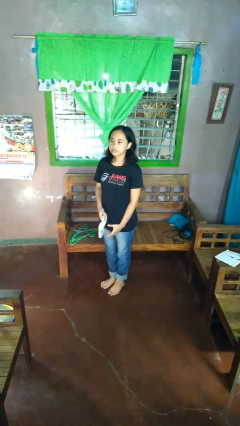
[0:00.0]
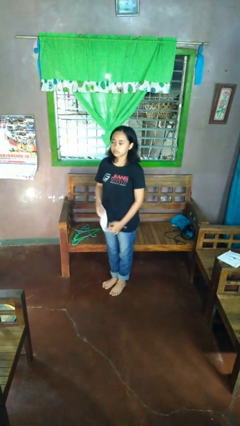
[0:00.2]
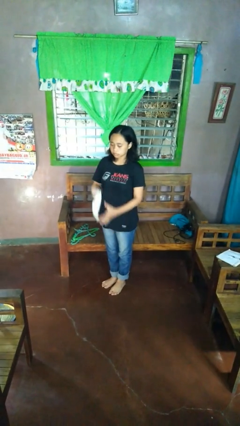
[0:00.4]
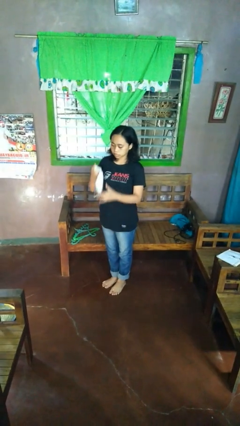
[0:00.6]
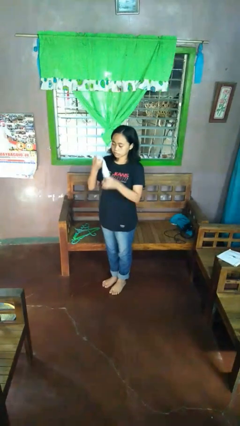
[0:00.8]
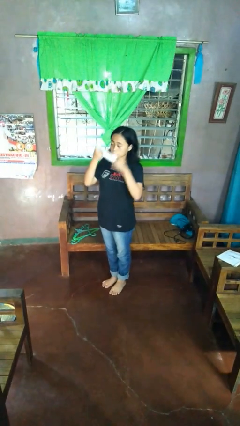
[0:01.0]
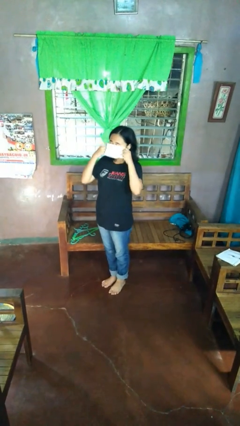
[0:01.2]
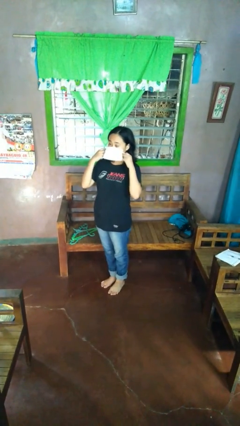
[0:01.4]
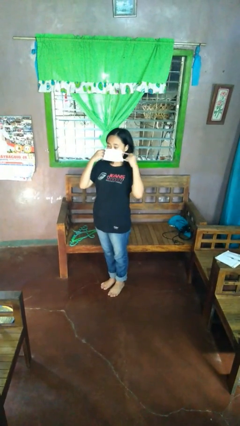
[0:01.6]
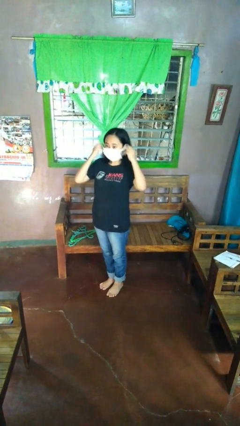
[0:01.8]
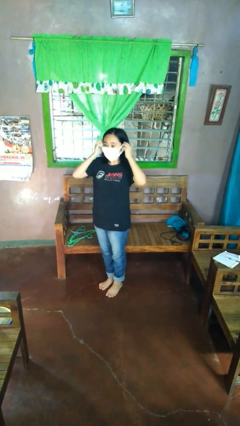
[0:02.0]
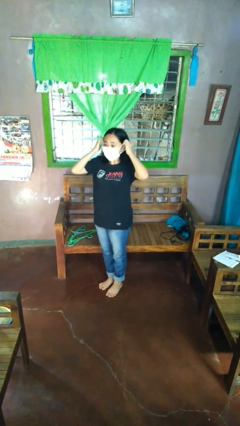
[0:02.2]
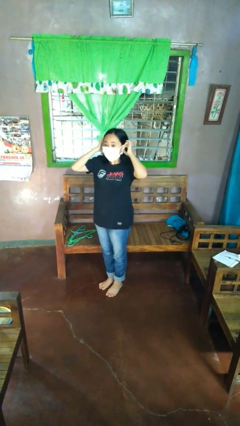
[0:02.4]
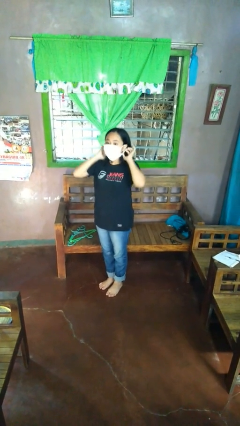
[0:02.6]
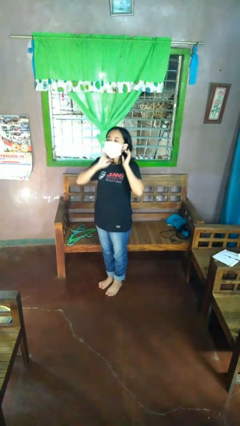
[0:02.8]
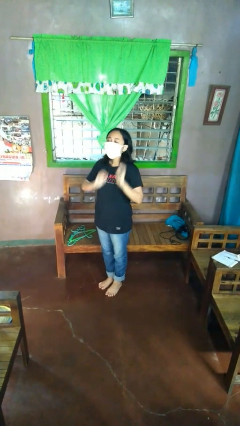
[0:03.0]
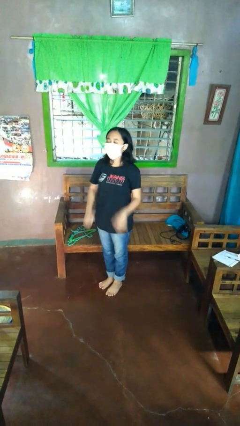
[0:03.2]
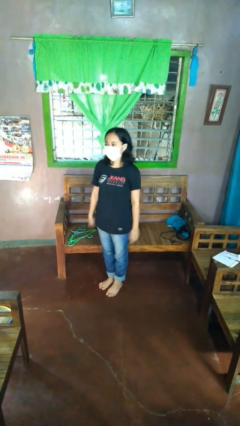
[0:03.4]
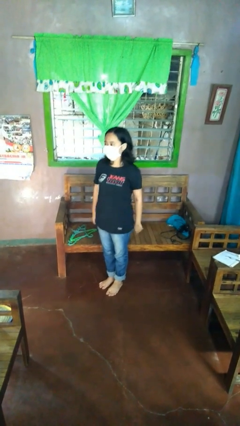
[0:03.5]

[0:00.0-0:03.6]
person puts on facemask

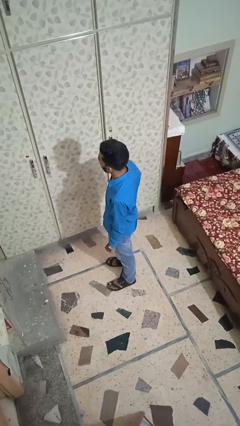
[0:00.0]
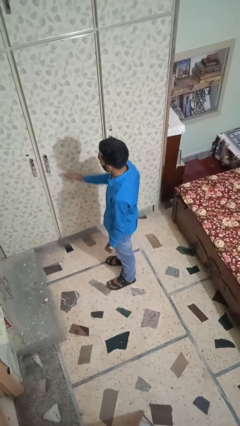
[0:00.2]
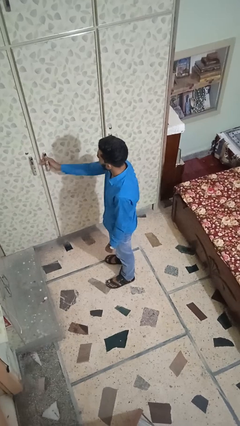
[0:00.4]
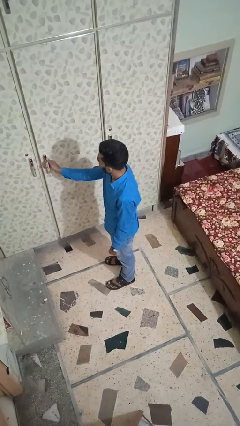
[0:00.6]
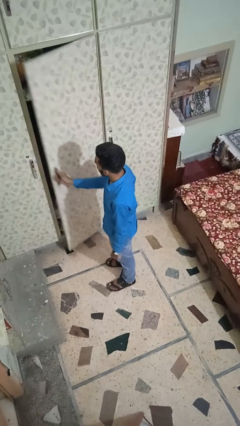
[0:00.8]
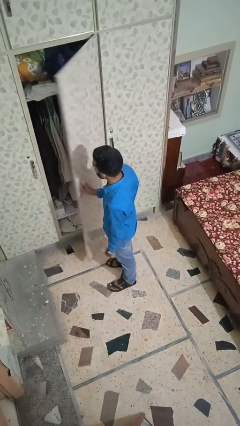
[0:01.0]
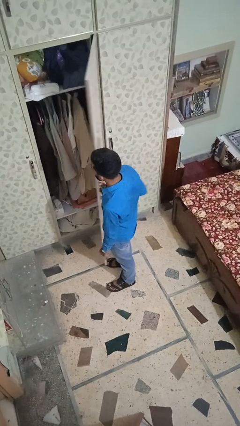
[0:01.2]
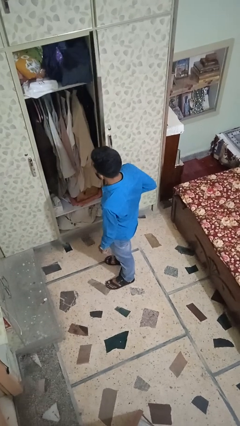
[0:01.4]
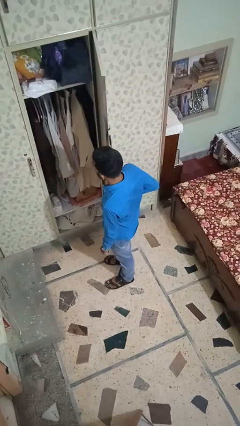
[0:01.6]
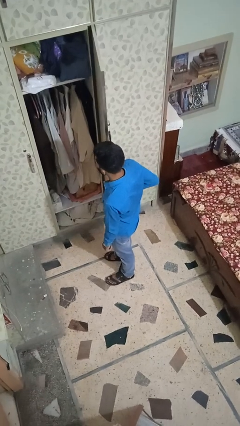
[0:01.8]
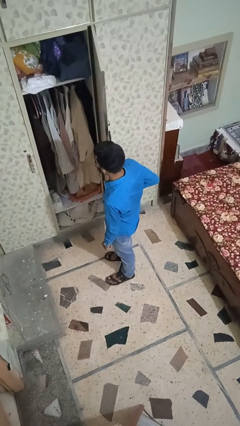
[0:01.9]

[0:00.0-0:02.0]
person opens closet door

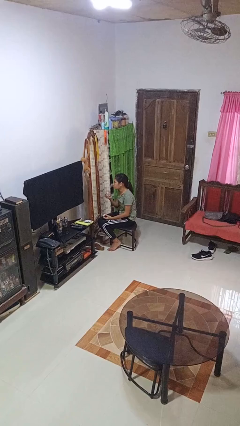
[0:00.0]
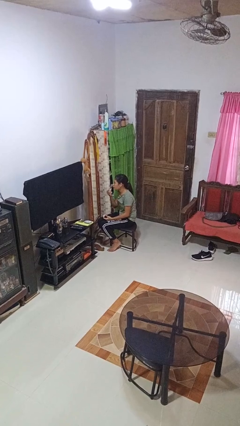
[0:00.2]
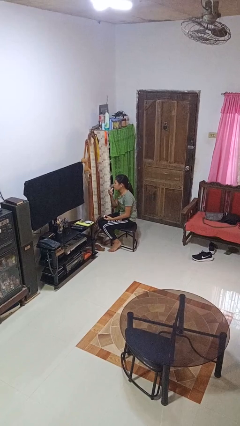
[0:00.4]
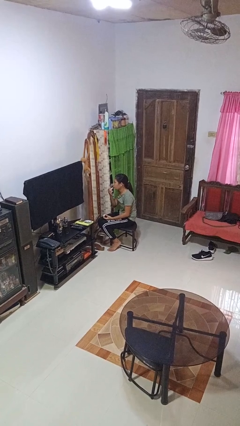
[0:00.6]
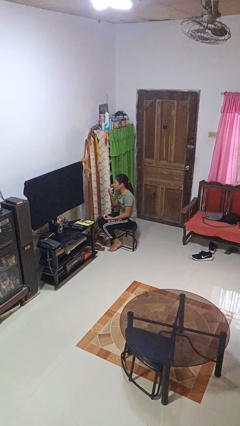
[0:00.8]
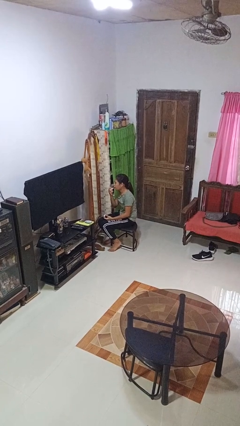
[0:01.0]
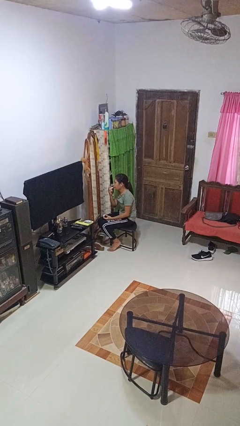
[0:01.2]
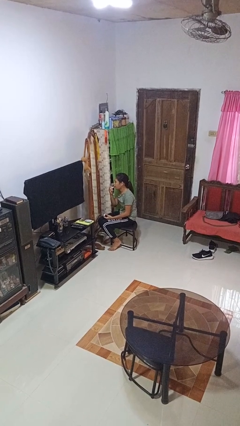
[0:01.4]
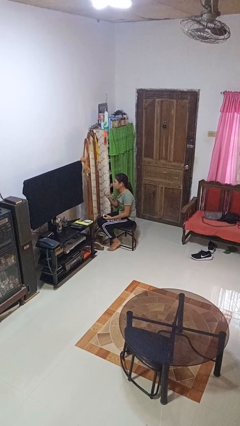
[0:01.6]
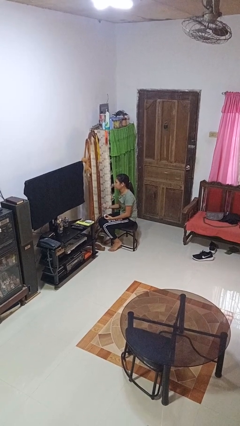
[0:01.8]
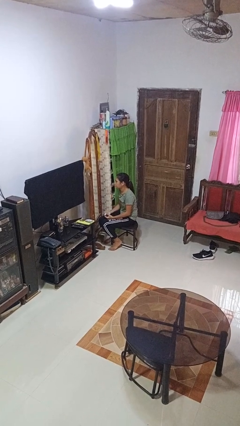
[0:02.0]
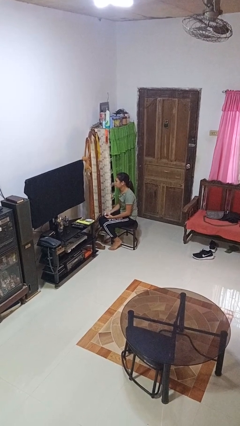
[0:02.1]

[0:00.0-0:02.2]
person applies lip makeup

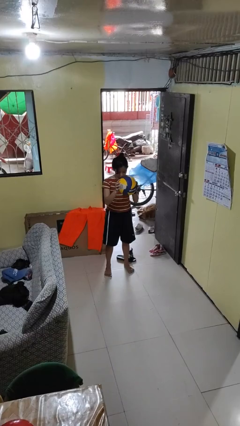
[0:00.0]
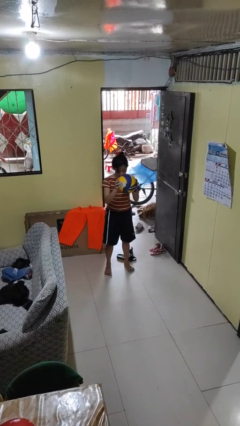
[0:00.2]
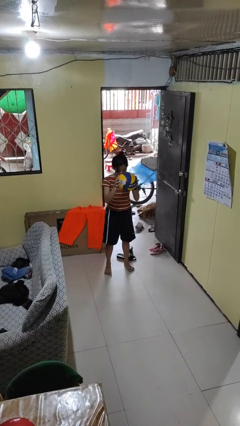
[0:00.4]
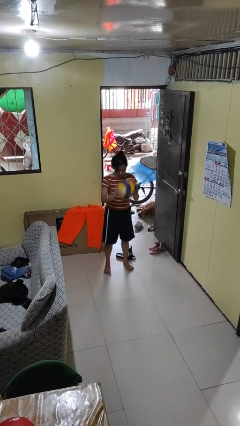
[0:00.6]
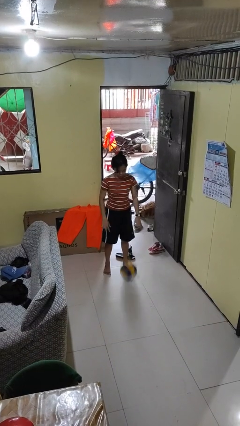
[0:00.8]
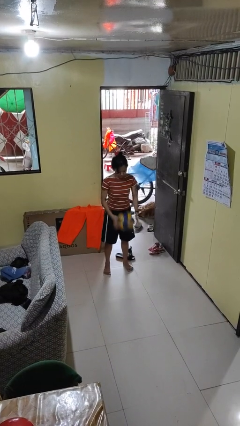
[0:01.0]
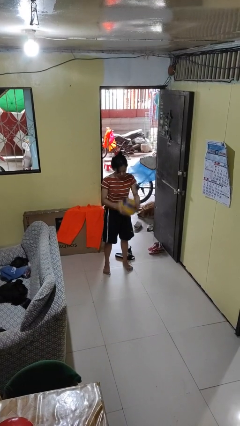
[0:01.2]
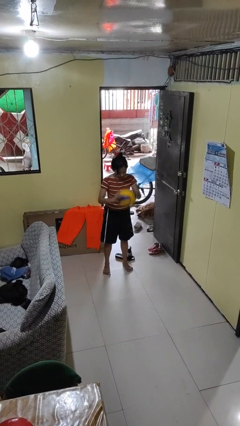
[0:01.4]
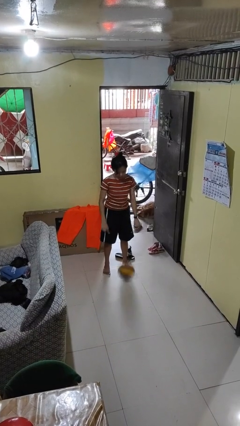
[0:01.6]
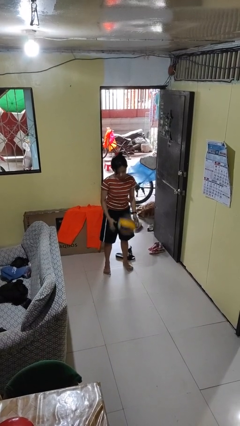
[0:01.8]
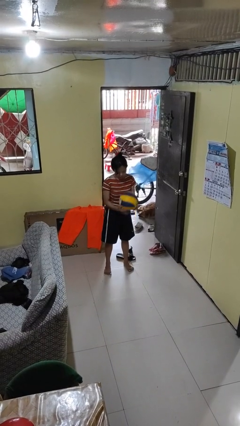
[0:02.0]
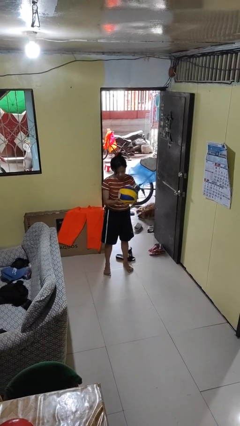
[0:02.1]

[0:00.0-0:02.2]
person bounces ball on floor

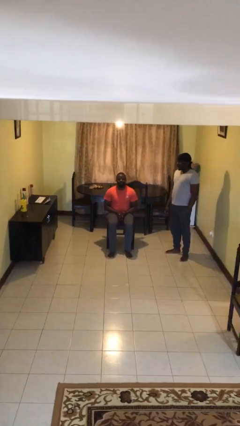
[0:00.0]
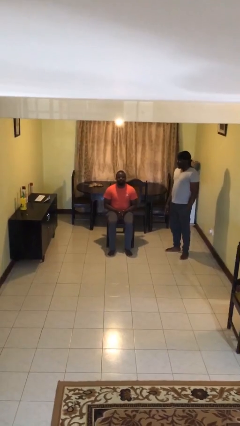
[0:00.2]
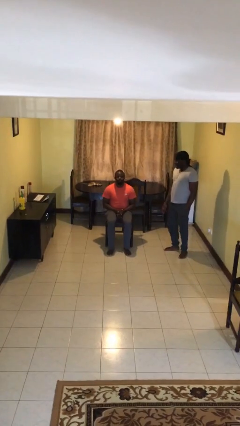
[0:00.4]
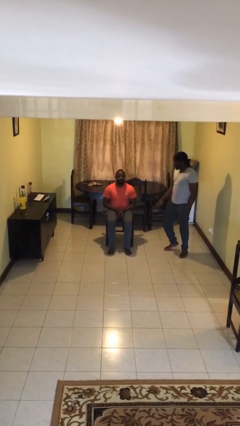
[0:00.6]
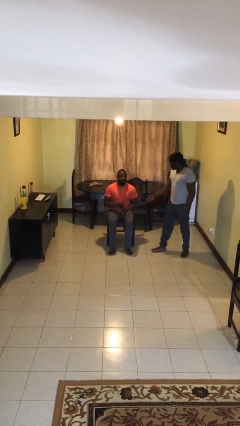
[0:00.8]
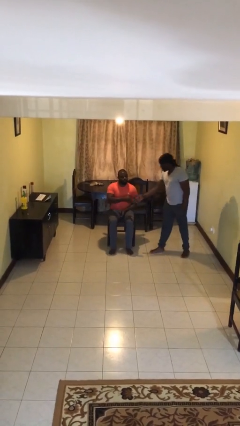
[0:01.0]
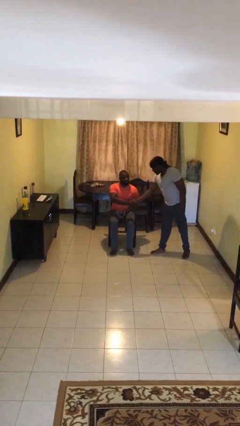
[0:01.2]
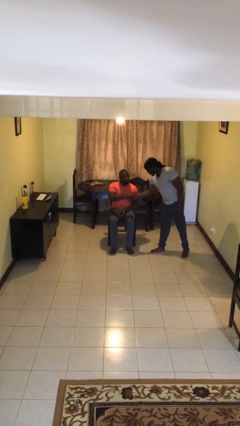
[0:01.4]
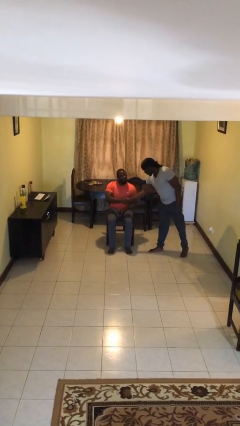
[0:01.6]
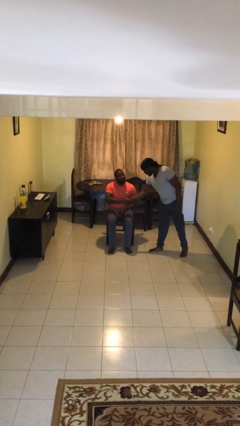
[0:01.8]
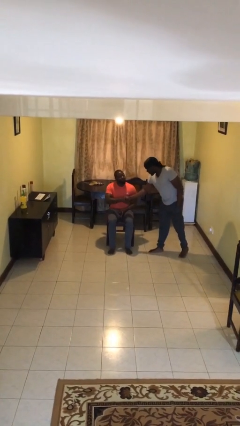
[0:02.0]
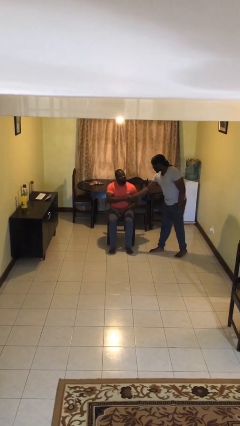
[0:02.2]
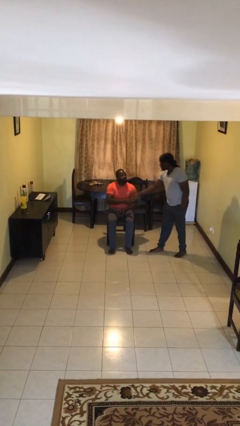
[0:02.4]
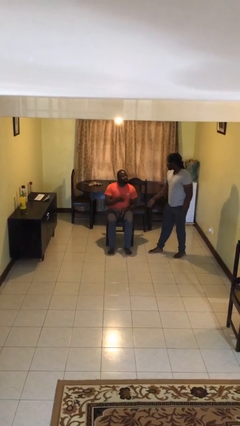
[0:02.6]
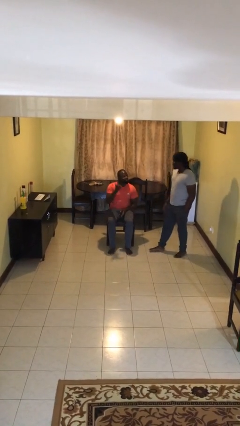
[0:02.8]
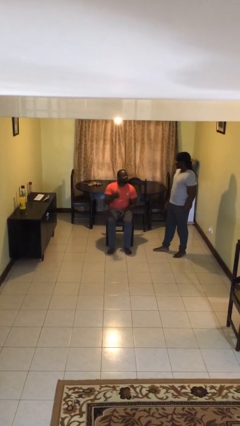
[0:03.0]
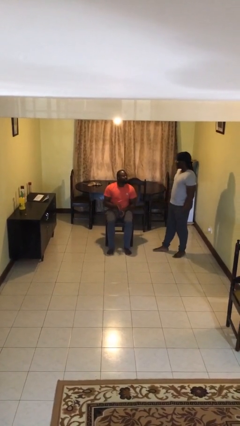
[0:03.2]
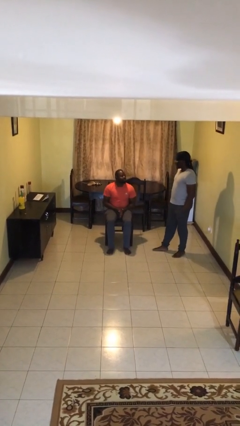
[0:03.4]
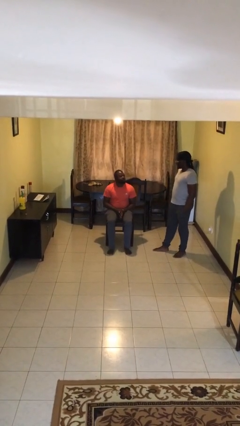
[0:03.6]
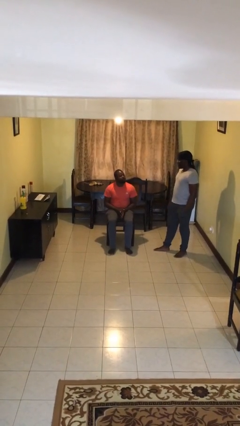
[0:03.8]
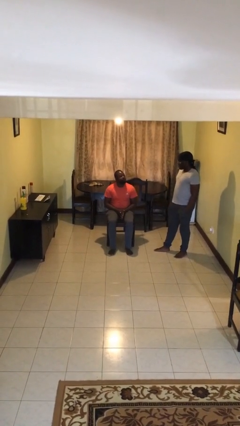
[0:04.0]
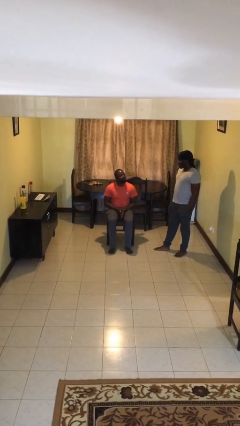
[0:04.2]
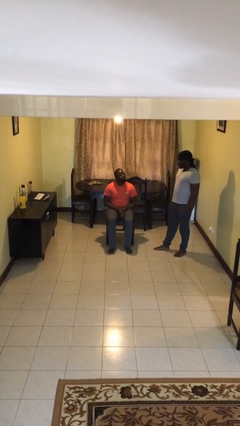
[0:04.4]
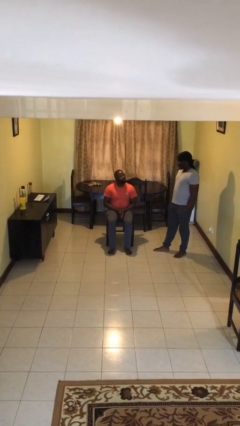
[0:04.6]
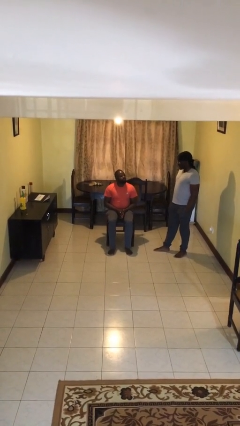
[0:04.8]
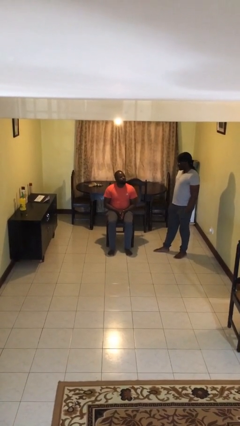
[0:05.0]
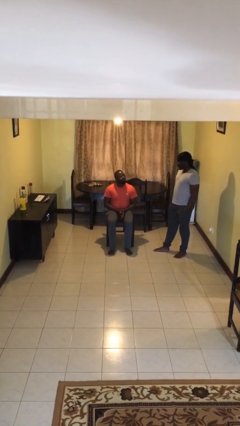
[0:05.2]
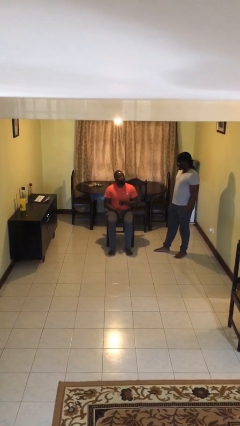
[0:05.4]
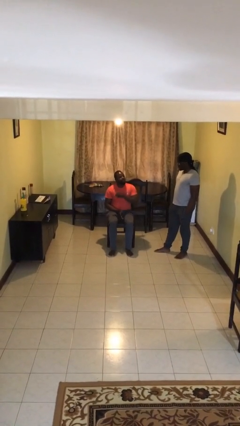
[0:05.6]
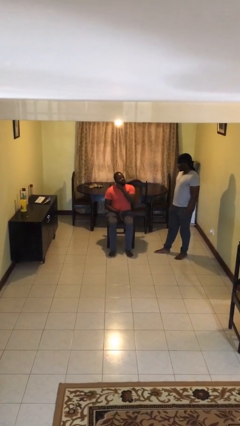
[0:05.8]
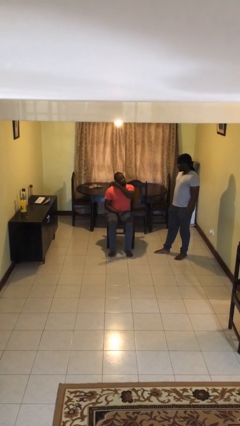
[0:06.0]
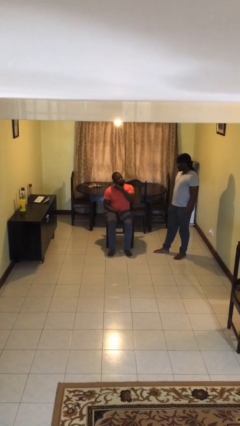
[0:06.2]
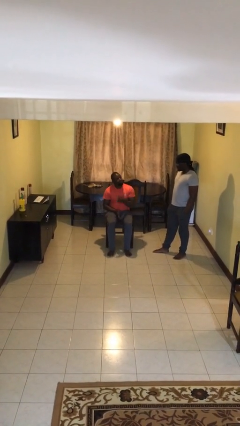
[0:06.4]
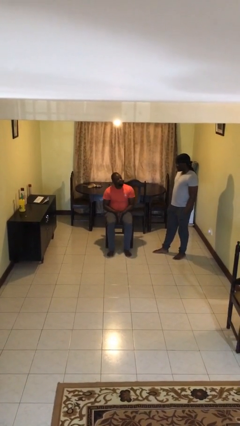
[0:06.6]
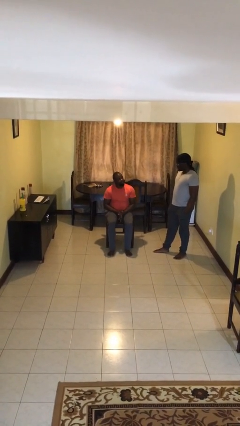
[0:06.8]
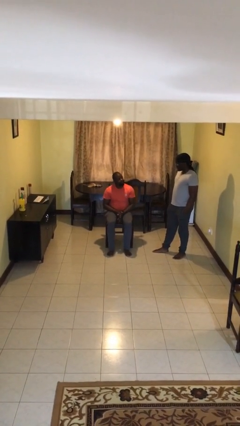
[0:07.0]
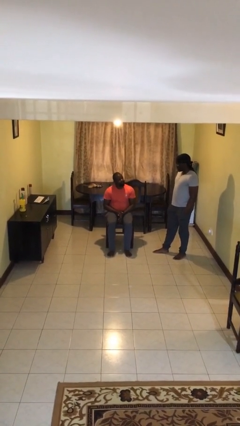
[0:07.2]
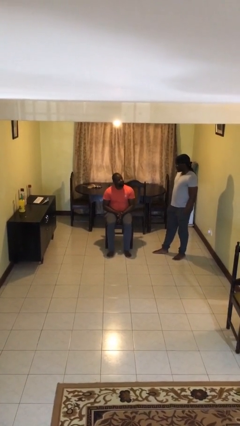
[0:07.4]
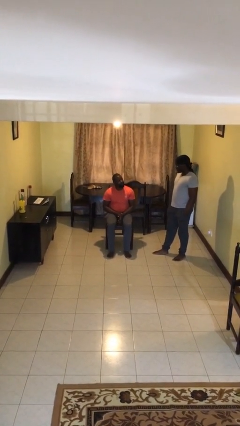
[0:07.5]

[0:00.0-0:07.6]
person shakes hand
